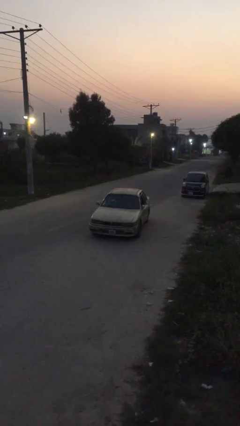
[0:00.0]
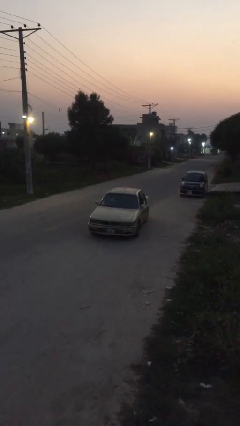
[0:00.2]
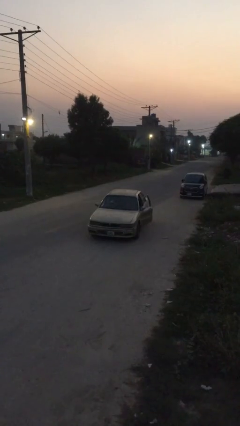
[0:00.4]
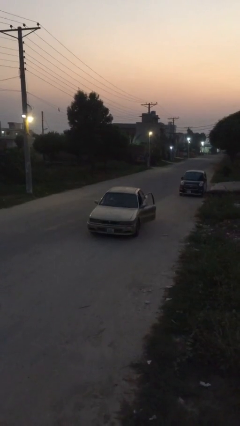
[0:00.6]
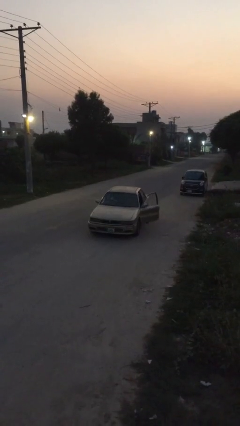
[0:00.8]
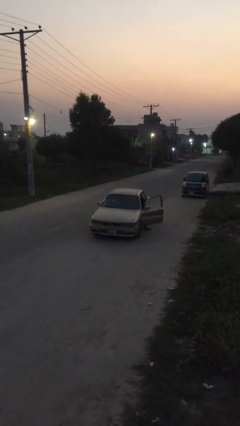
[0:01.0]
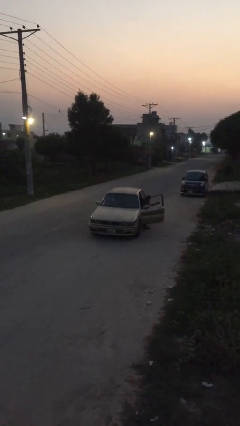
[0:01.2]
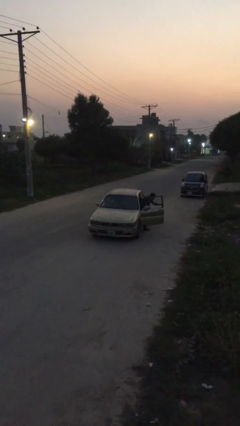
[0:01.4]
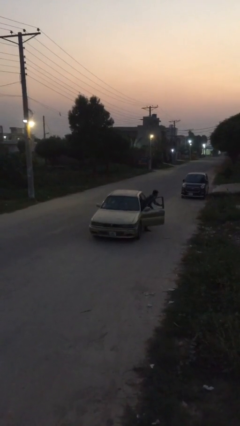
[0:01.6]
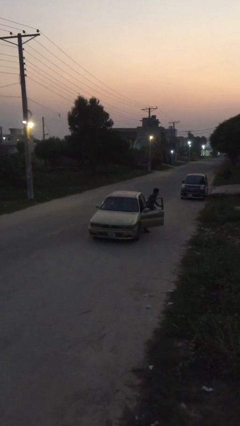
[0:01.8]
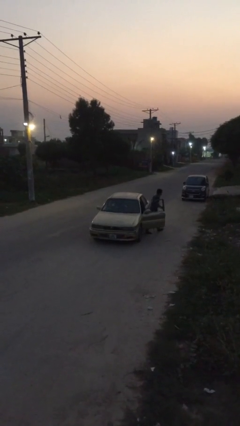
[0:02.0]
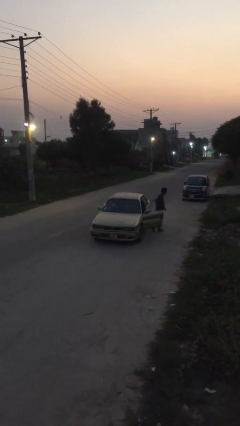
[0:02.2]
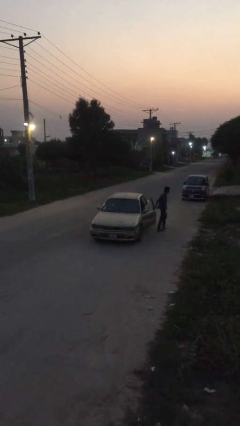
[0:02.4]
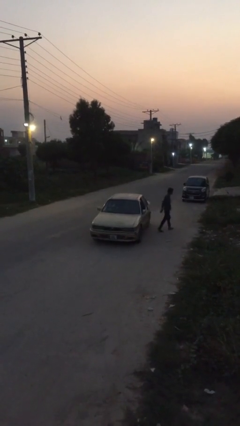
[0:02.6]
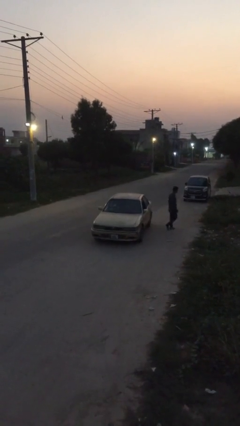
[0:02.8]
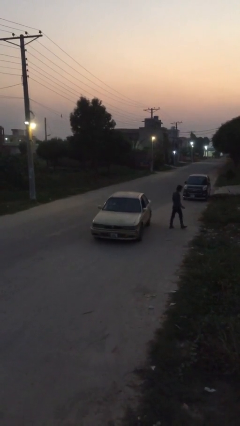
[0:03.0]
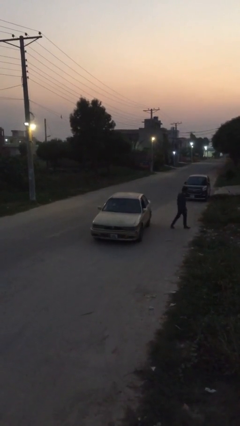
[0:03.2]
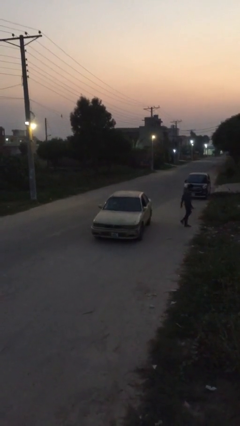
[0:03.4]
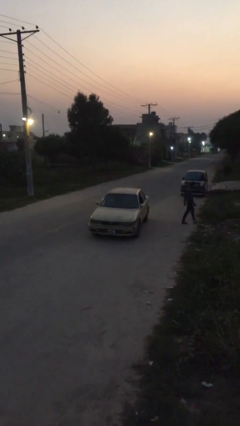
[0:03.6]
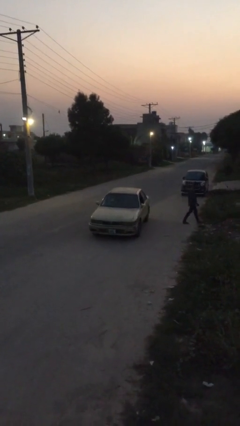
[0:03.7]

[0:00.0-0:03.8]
car drops off person

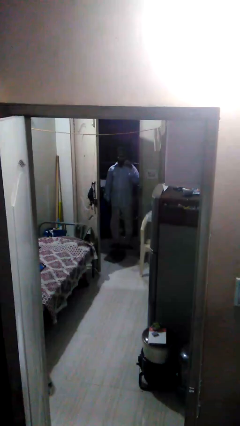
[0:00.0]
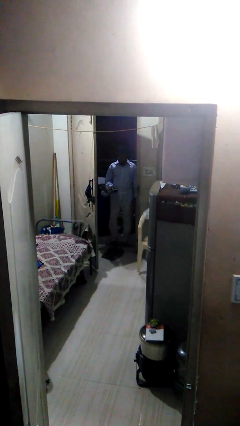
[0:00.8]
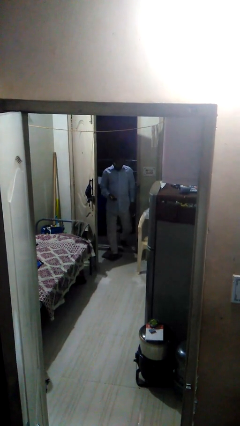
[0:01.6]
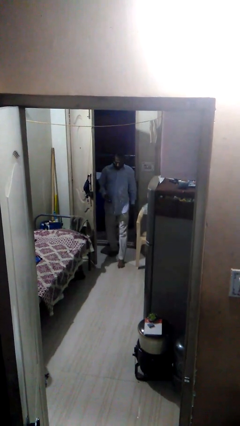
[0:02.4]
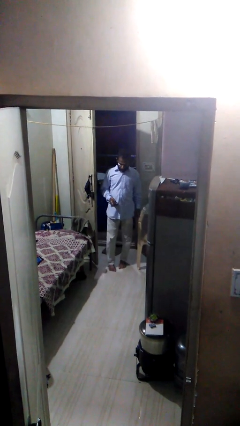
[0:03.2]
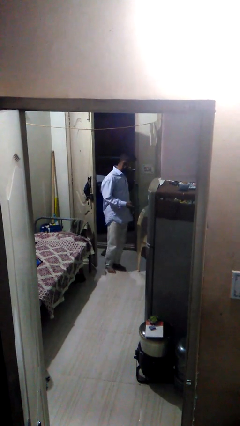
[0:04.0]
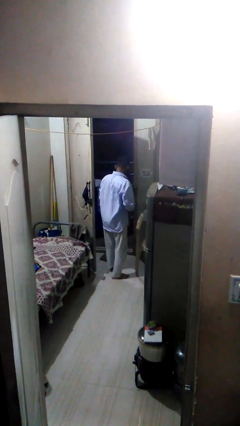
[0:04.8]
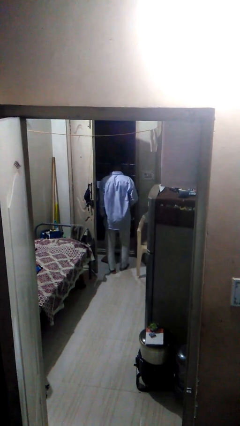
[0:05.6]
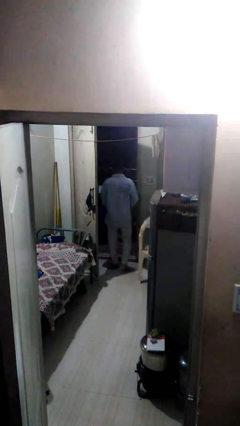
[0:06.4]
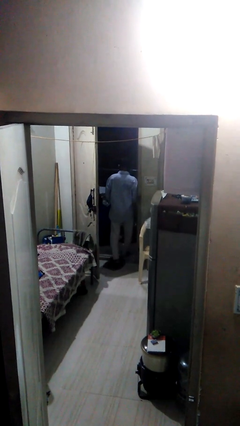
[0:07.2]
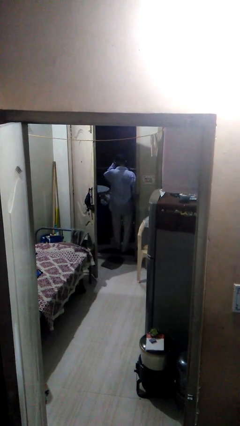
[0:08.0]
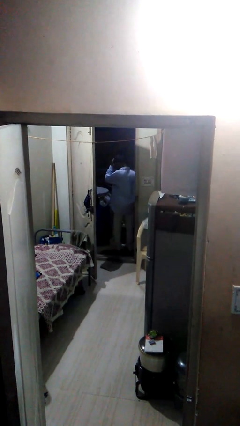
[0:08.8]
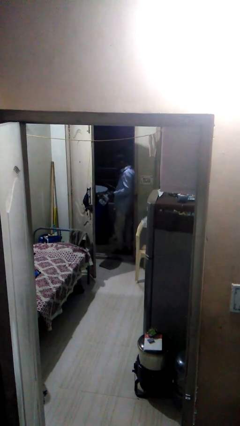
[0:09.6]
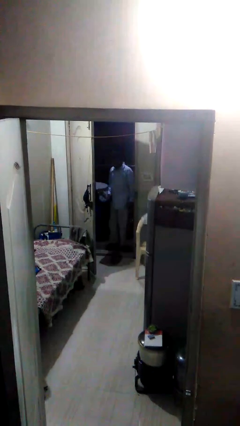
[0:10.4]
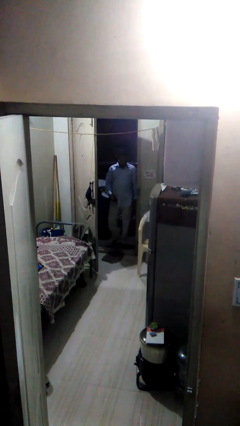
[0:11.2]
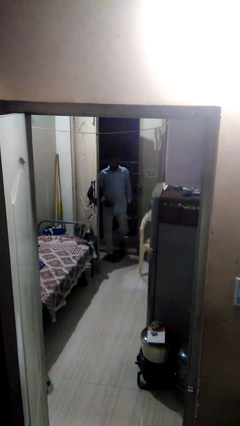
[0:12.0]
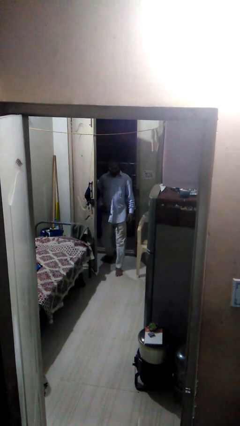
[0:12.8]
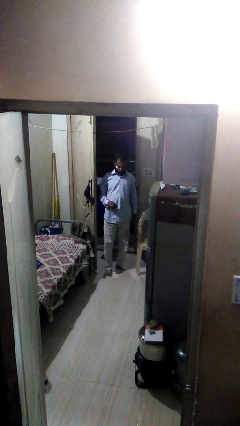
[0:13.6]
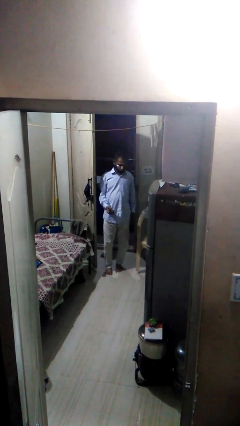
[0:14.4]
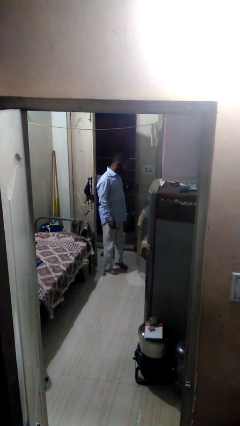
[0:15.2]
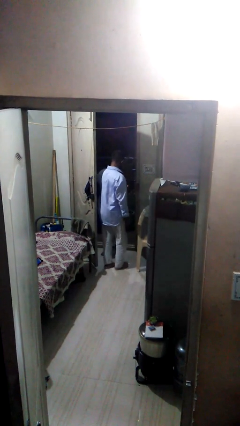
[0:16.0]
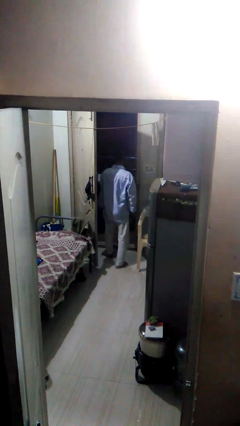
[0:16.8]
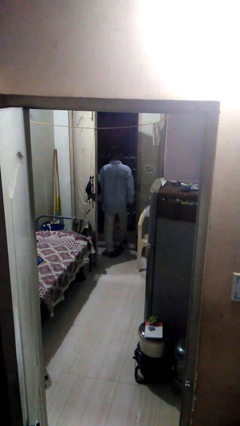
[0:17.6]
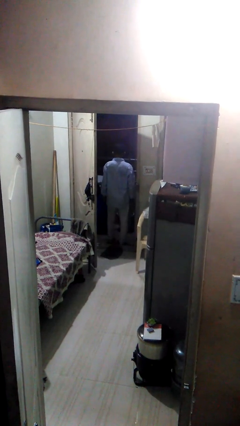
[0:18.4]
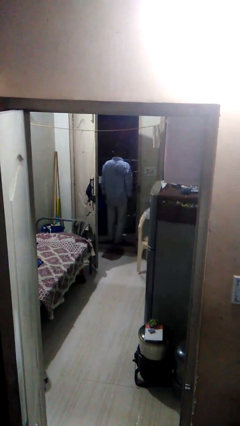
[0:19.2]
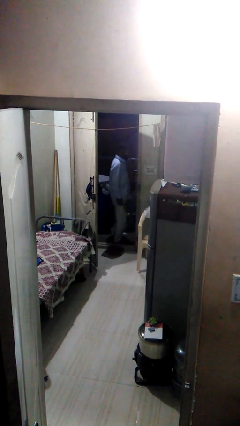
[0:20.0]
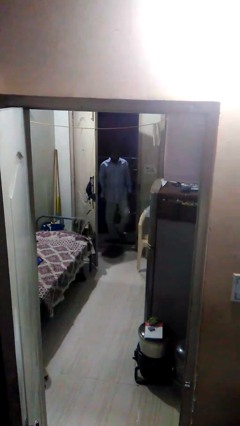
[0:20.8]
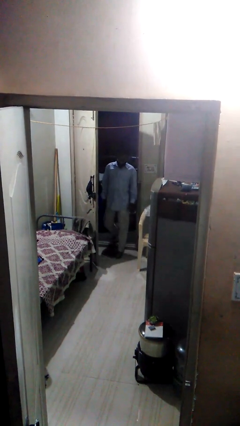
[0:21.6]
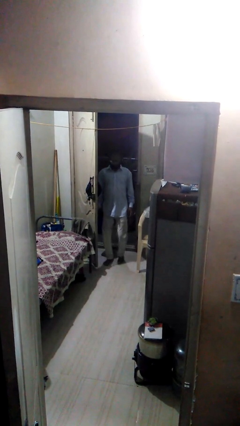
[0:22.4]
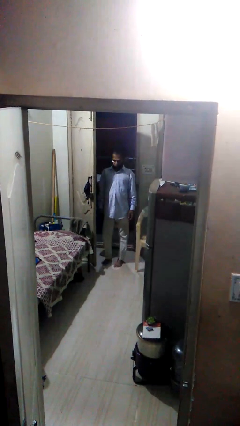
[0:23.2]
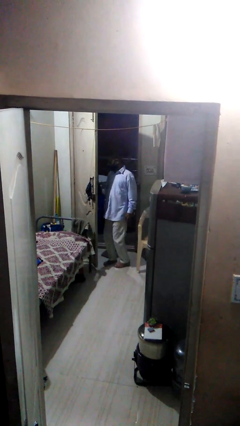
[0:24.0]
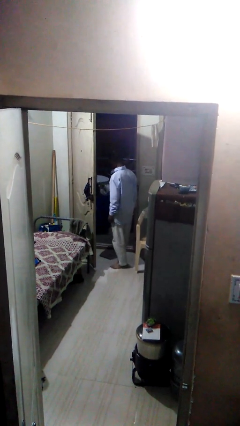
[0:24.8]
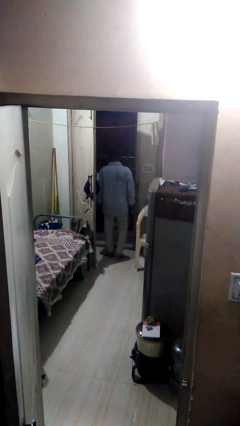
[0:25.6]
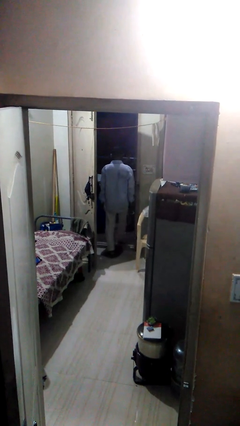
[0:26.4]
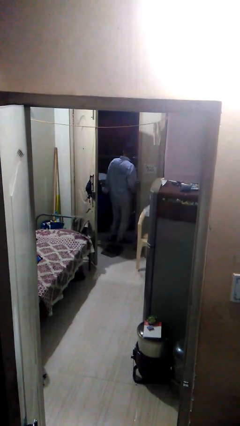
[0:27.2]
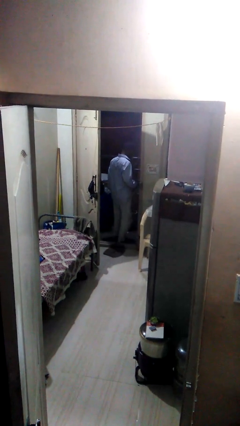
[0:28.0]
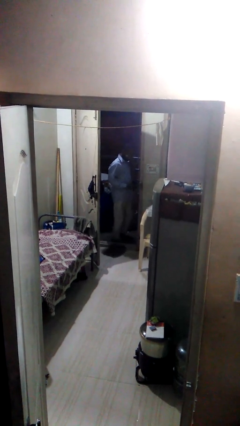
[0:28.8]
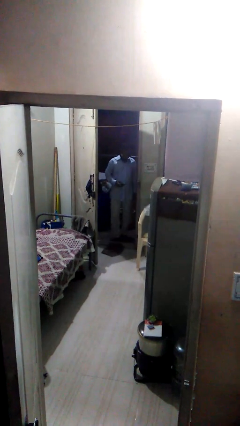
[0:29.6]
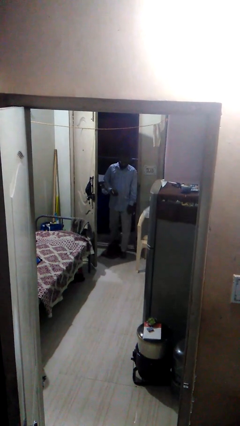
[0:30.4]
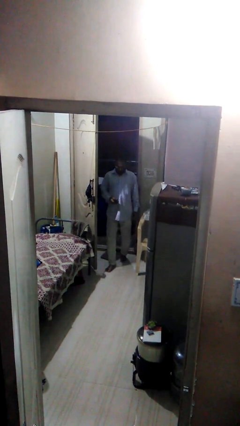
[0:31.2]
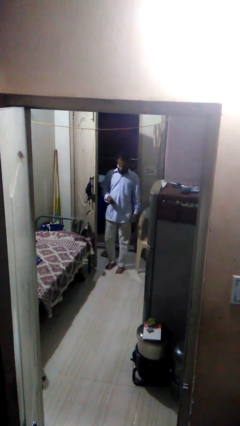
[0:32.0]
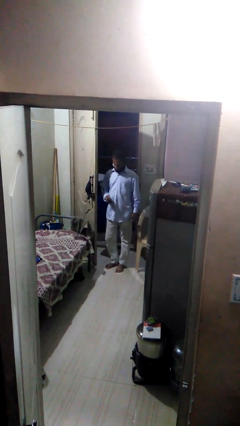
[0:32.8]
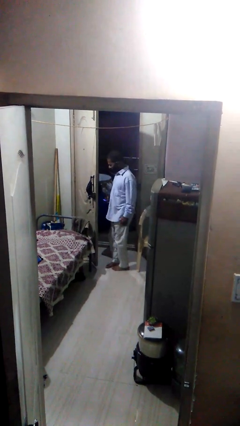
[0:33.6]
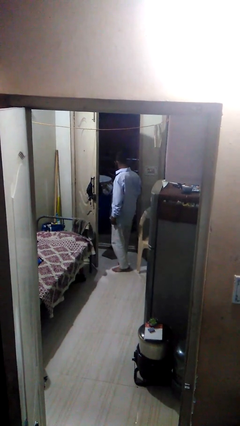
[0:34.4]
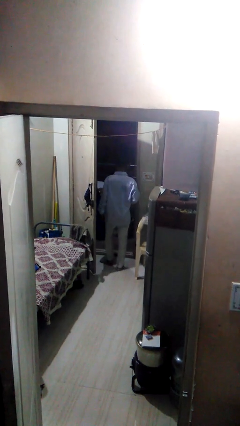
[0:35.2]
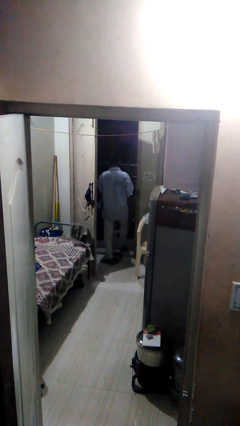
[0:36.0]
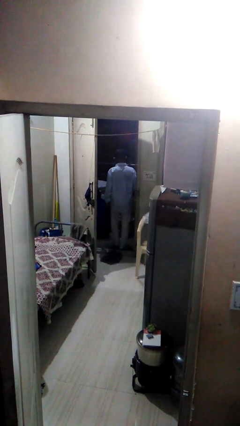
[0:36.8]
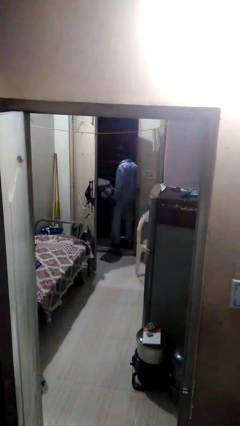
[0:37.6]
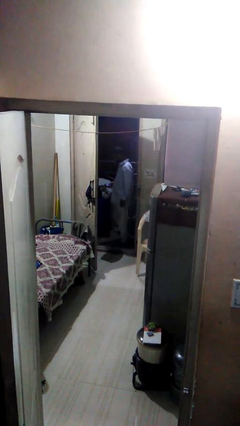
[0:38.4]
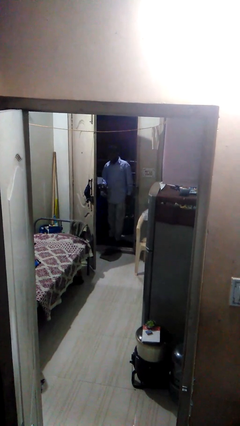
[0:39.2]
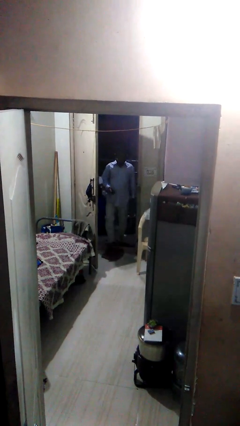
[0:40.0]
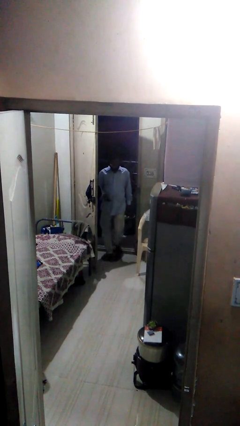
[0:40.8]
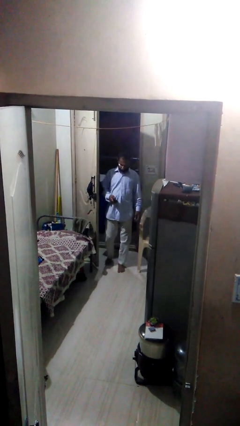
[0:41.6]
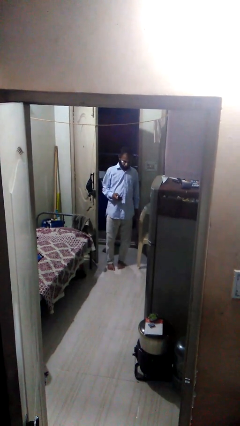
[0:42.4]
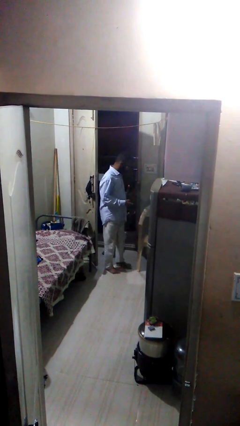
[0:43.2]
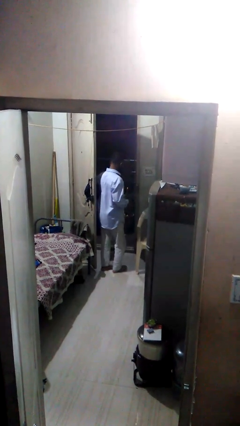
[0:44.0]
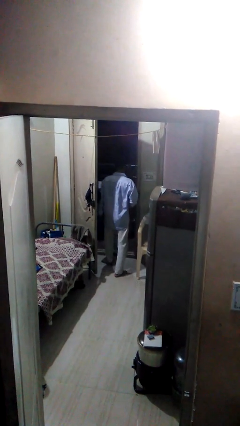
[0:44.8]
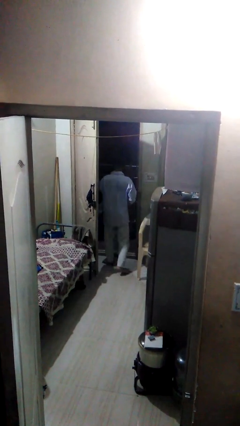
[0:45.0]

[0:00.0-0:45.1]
person texts on phone

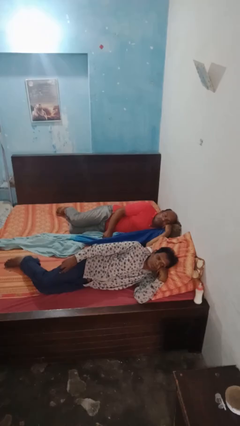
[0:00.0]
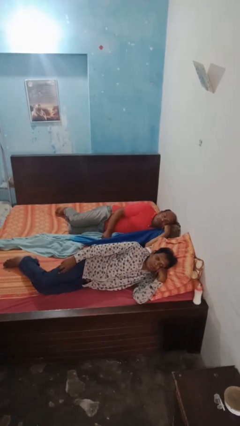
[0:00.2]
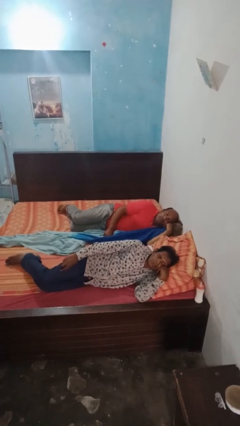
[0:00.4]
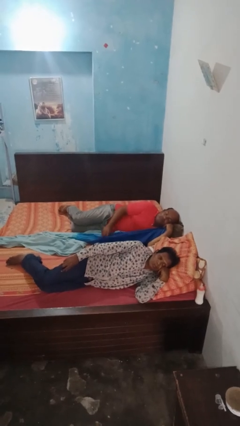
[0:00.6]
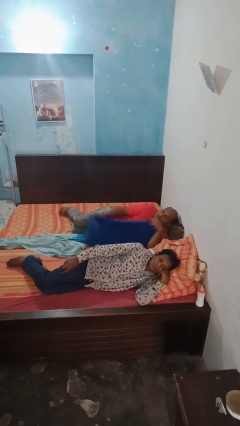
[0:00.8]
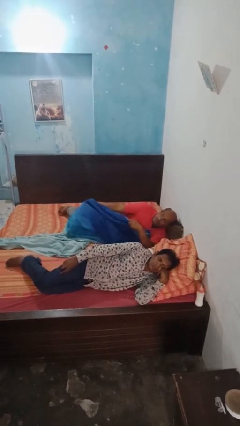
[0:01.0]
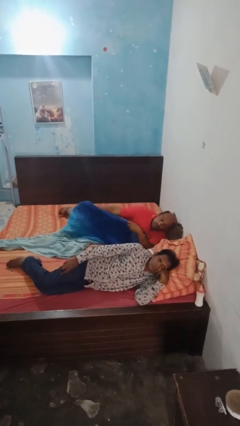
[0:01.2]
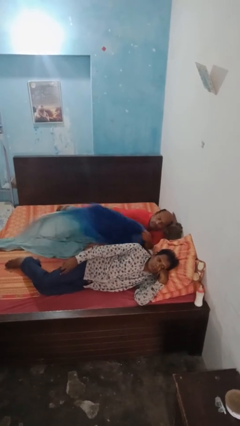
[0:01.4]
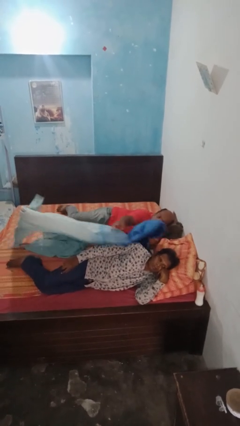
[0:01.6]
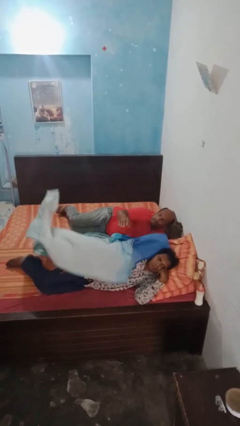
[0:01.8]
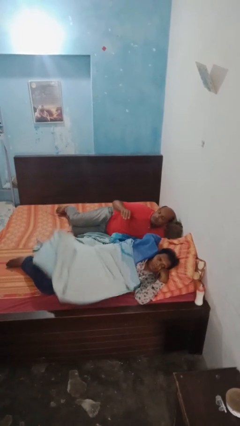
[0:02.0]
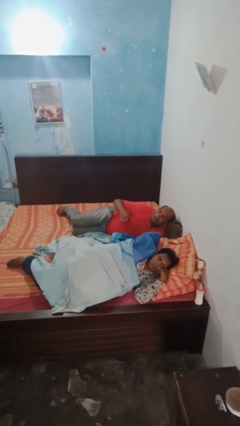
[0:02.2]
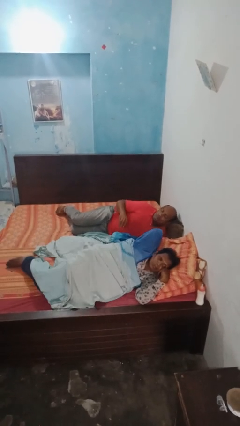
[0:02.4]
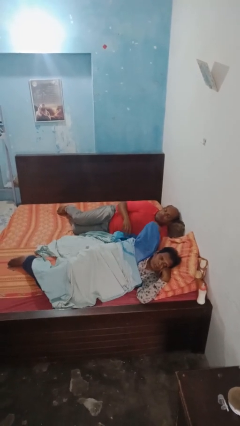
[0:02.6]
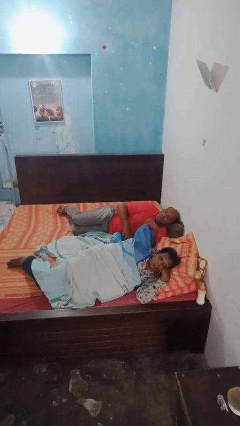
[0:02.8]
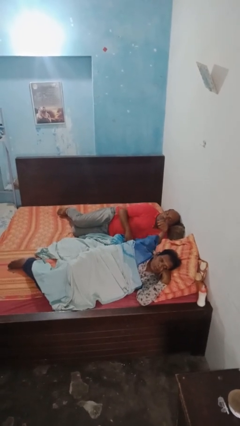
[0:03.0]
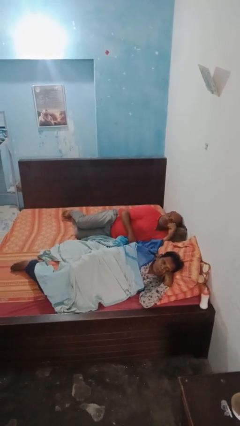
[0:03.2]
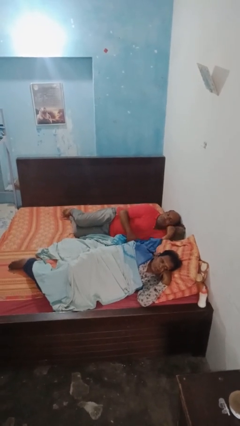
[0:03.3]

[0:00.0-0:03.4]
person covers friend with blanket
